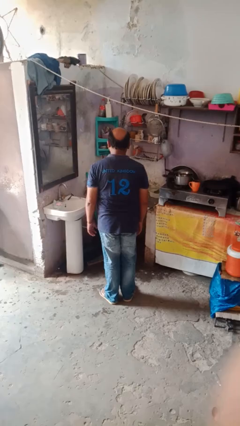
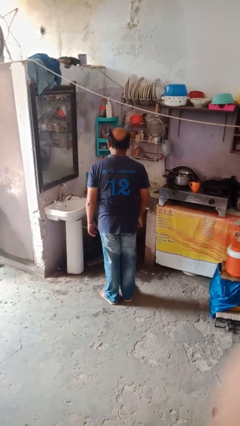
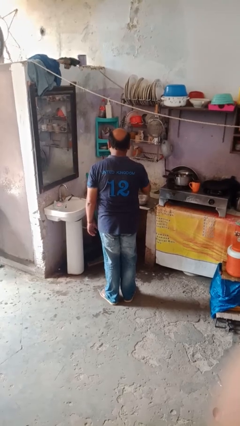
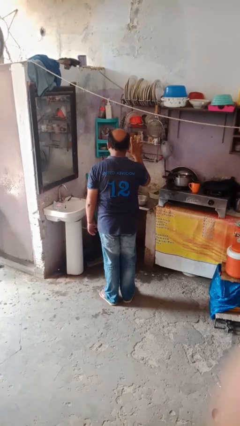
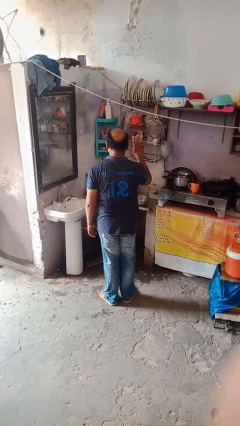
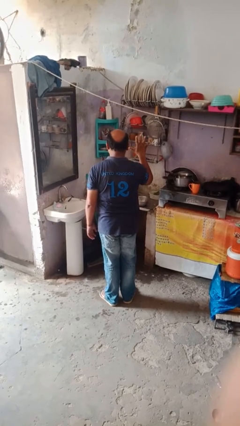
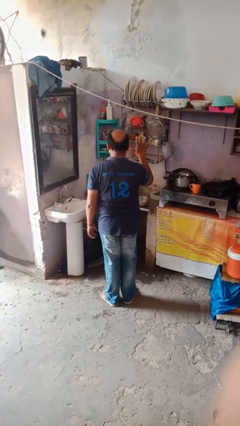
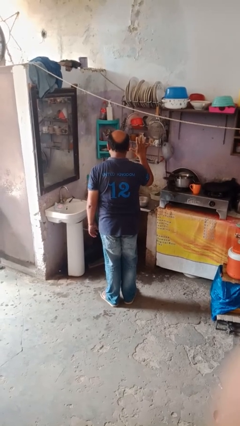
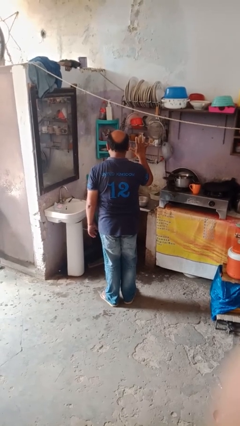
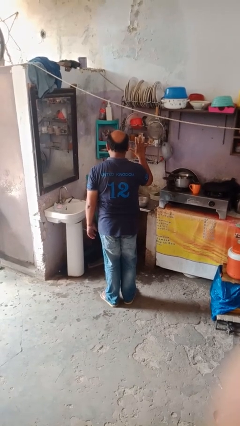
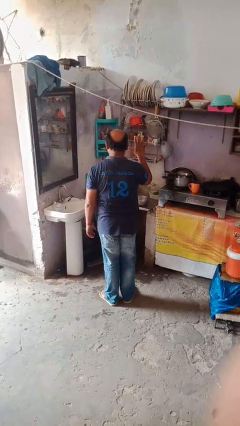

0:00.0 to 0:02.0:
person gestures number five

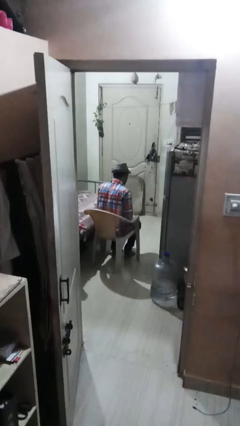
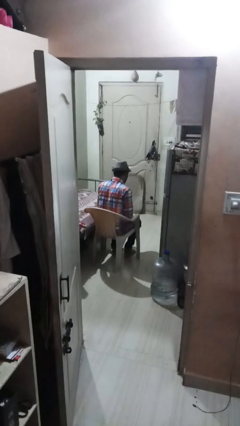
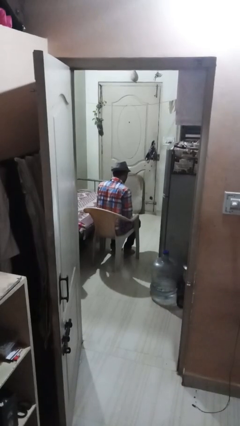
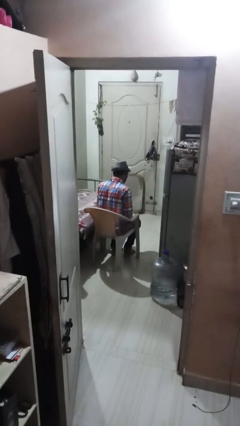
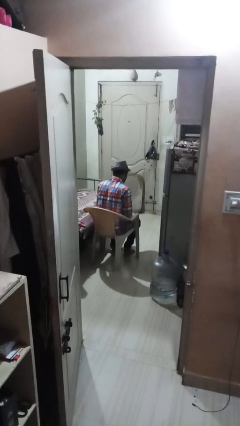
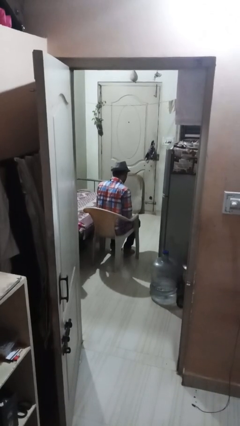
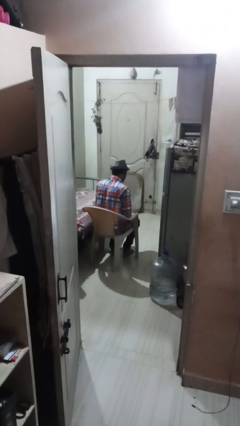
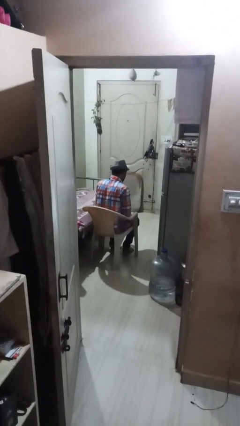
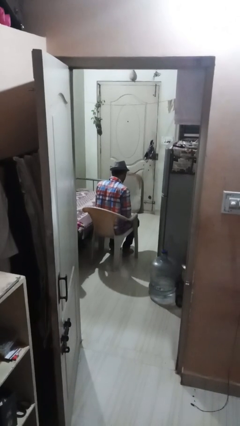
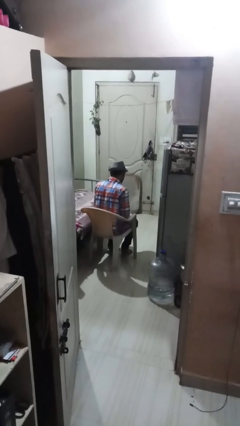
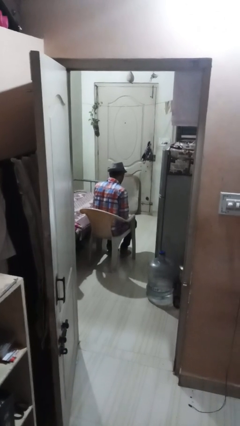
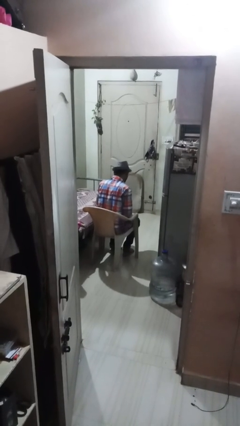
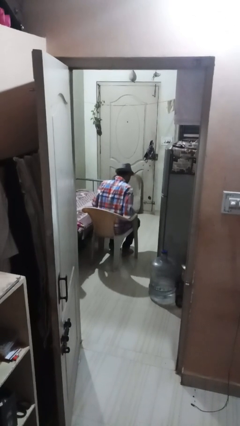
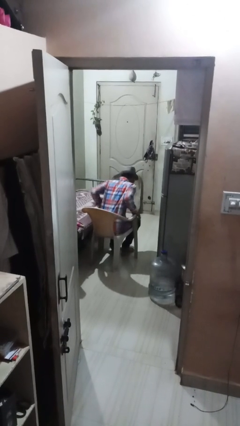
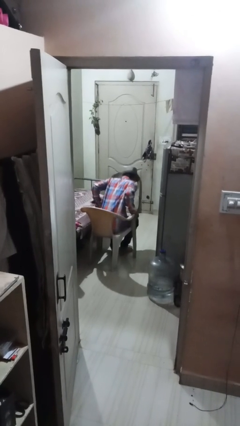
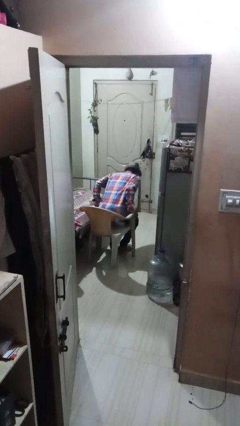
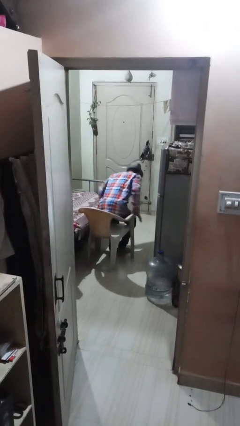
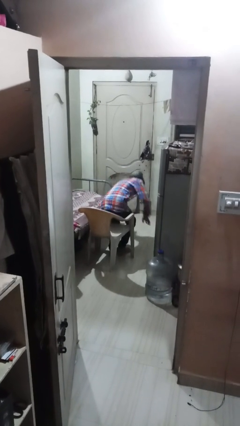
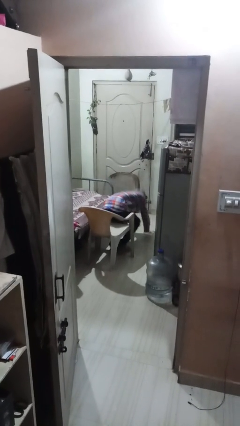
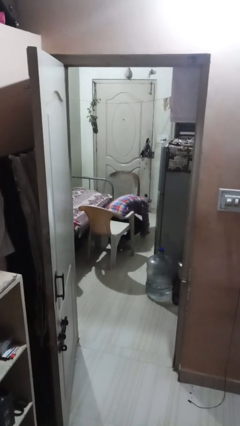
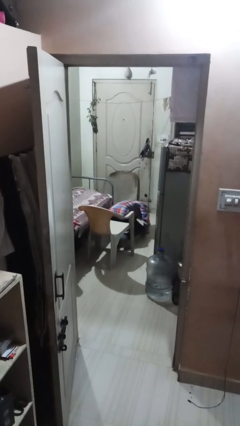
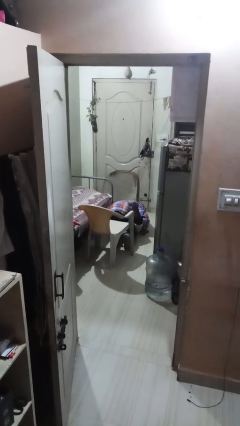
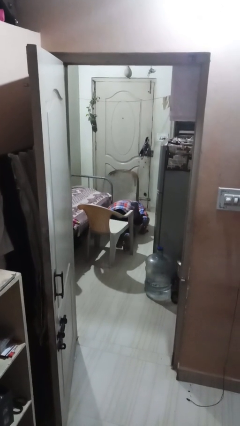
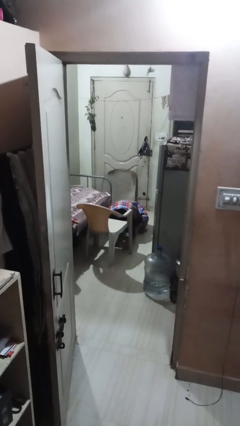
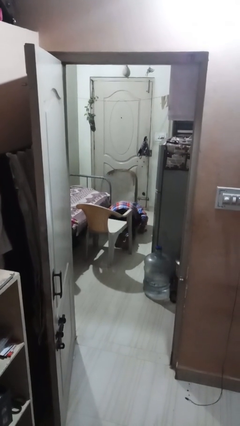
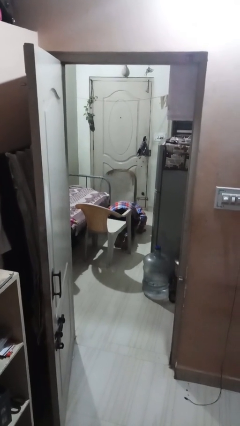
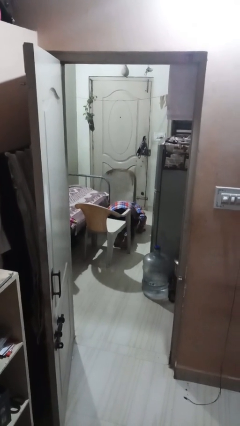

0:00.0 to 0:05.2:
person falls from chair

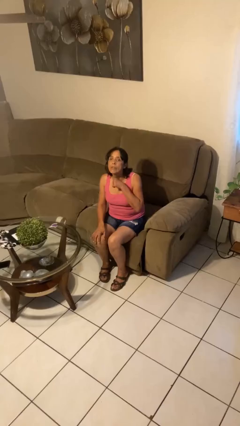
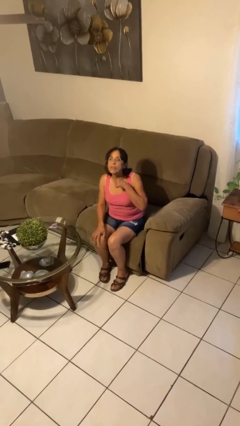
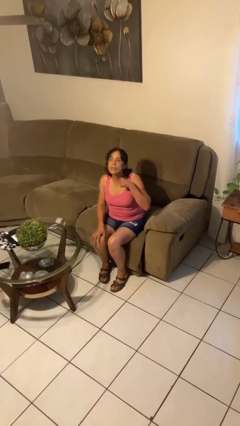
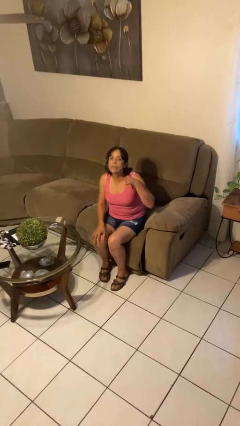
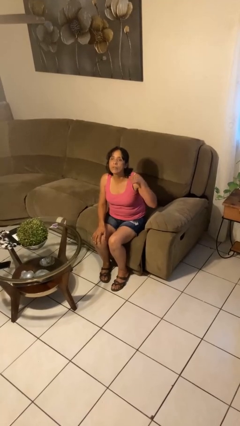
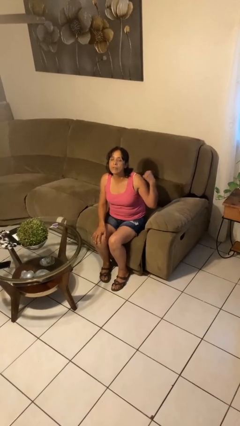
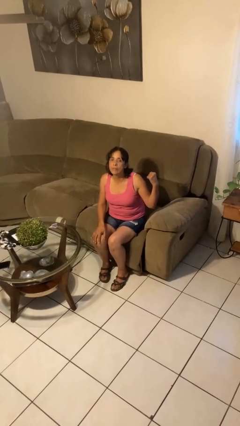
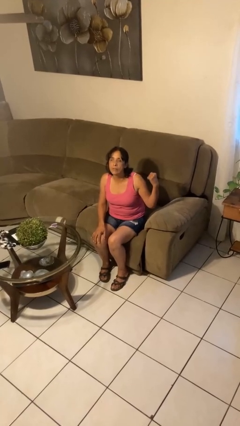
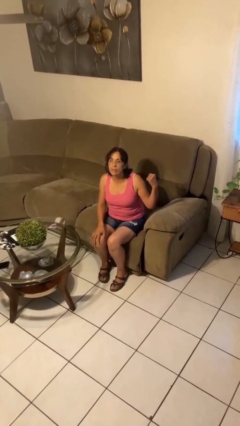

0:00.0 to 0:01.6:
person gestures cut

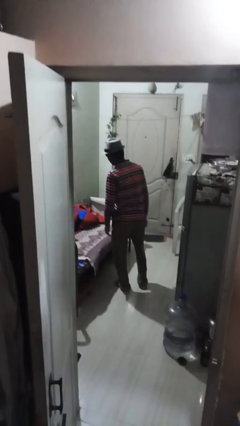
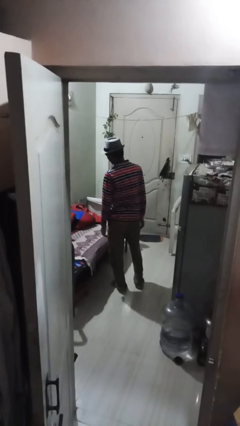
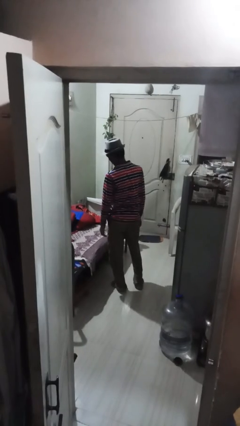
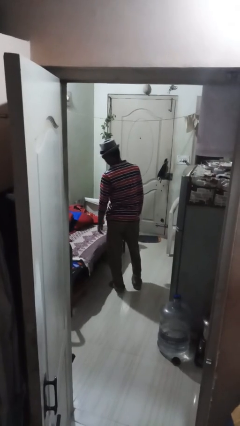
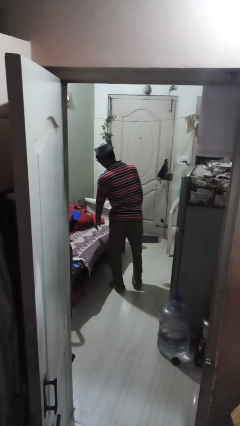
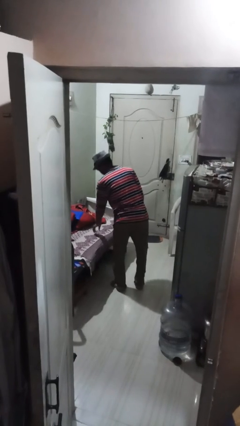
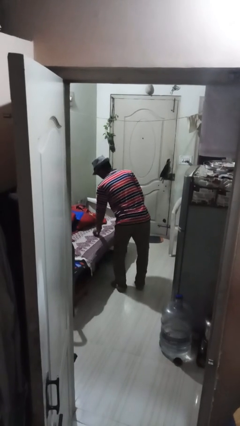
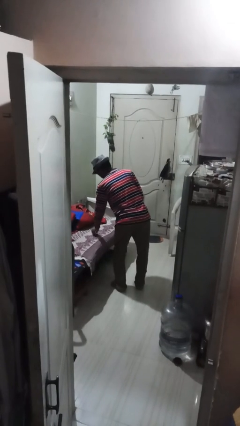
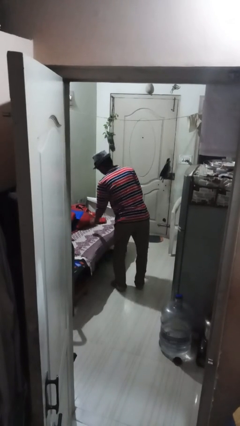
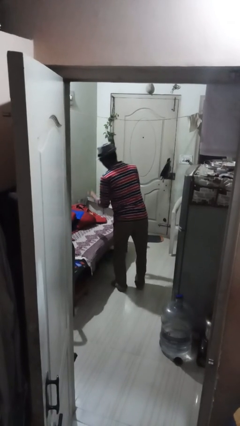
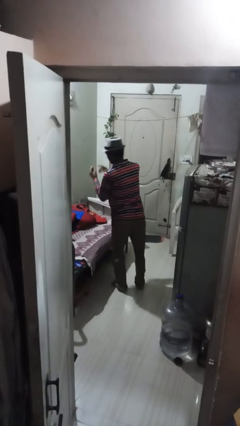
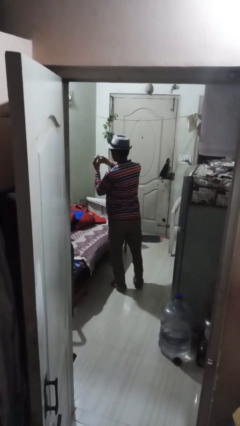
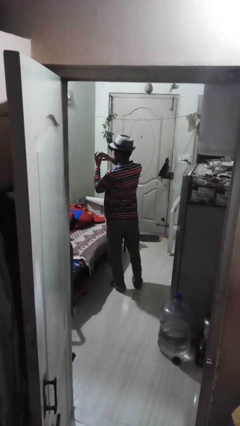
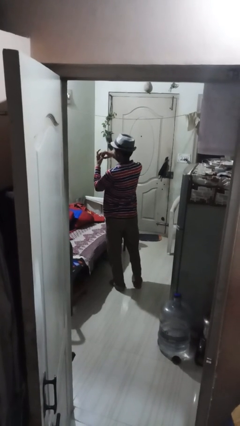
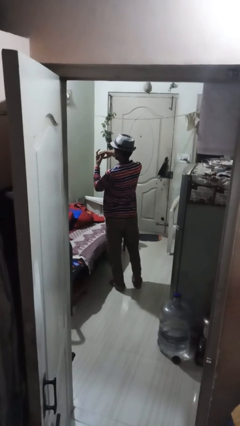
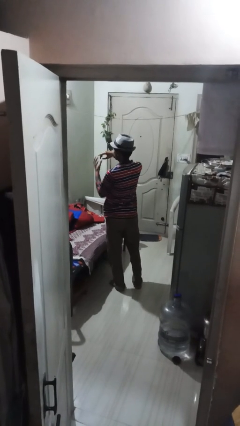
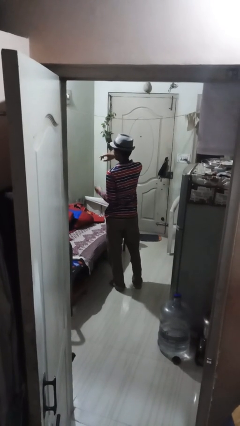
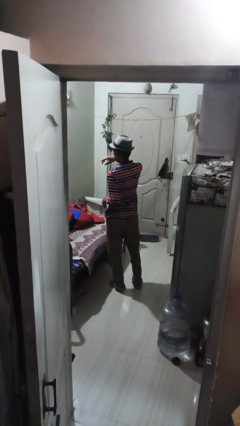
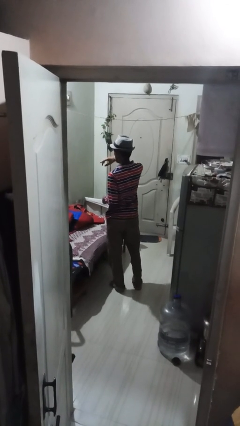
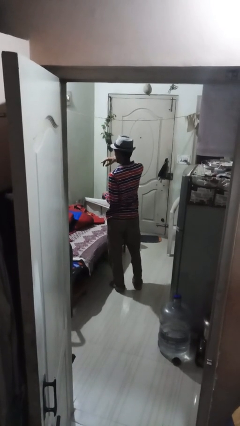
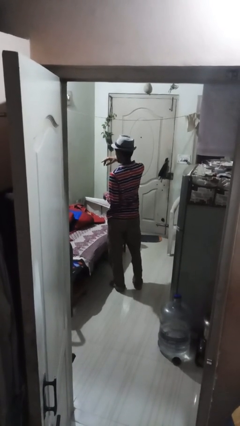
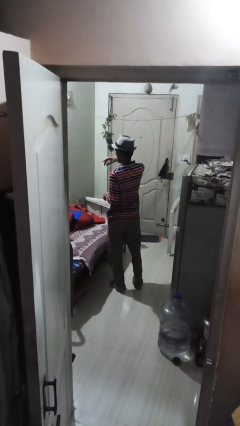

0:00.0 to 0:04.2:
person puts on ring

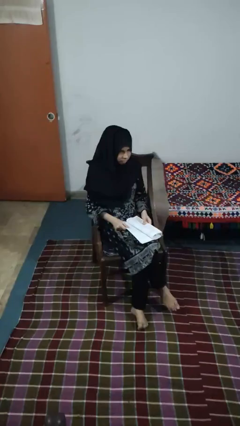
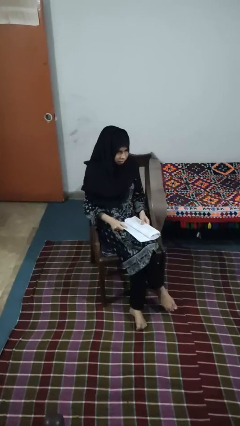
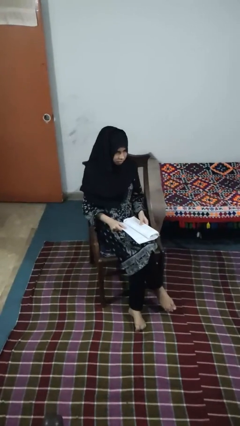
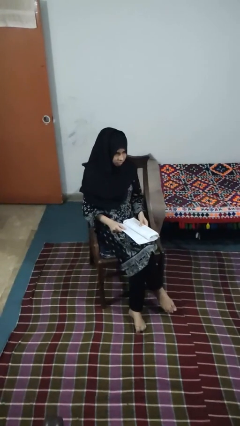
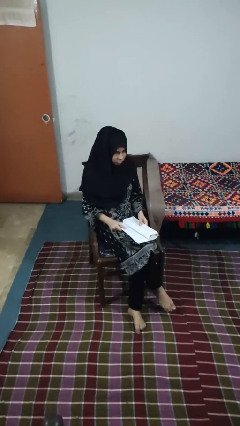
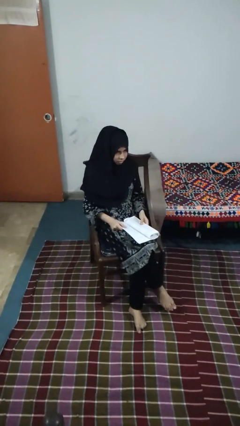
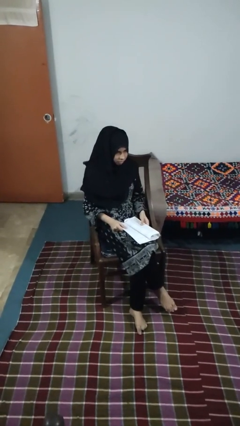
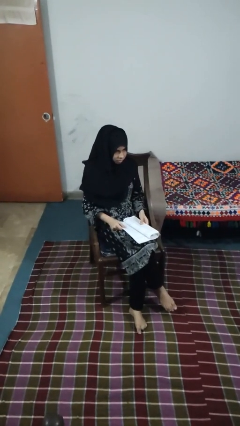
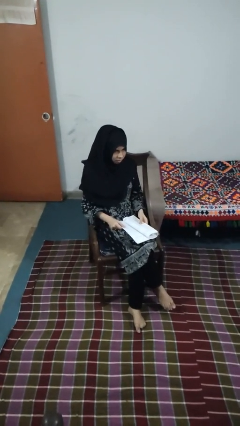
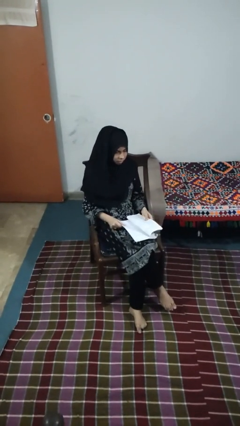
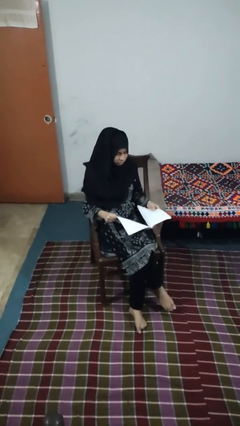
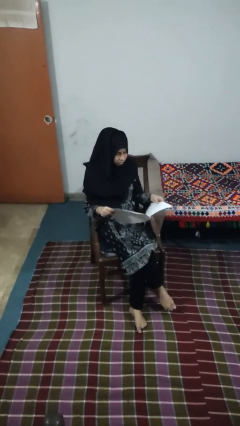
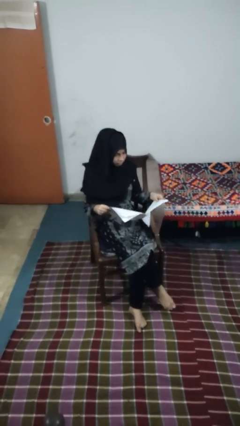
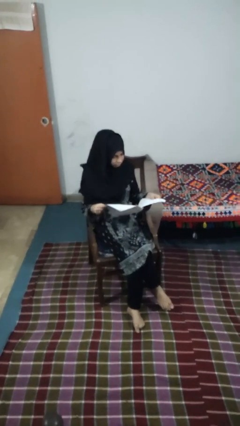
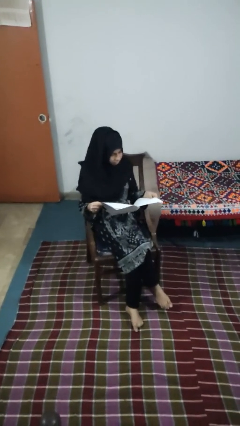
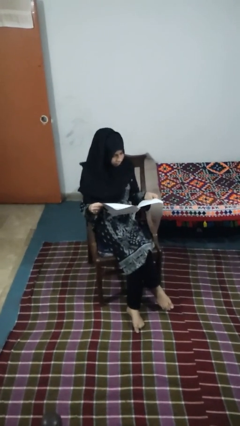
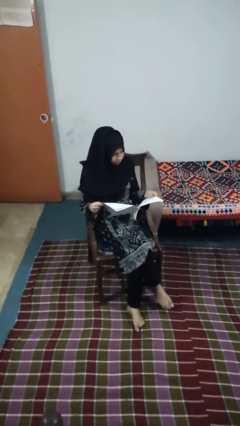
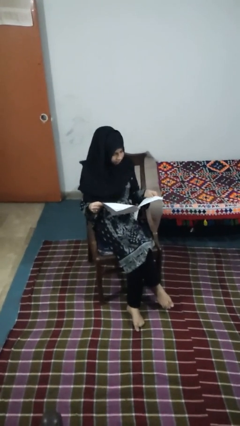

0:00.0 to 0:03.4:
person reads newspaper

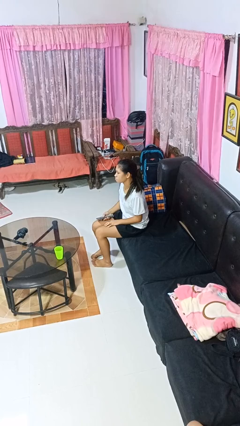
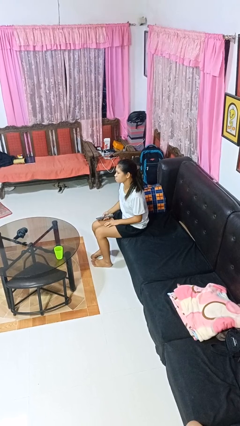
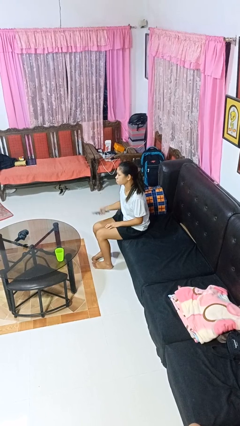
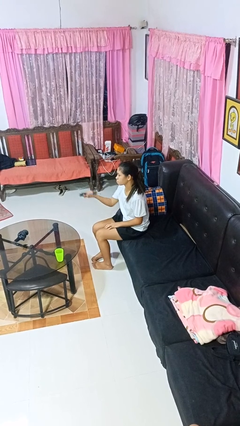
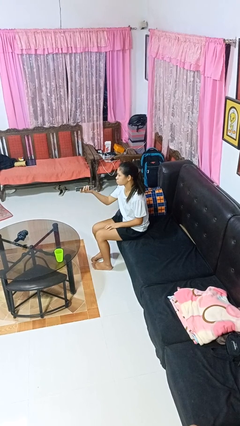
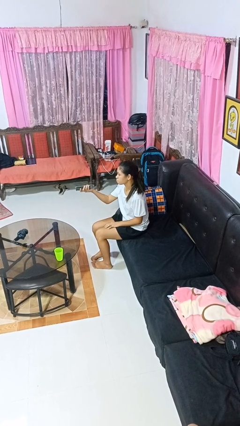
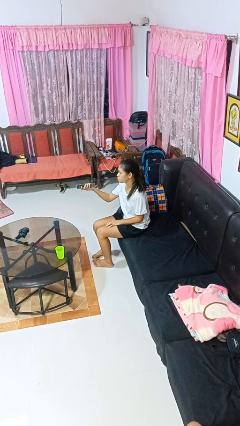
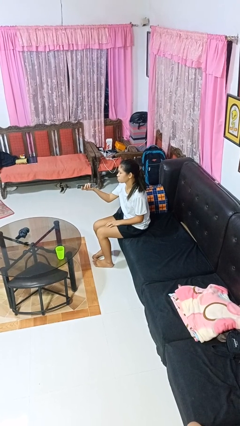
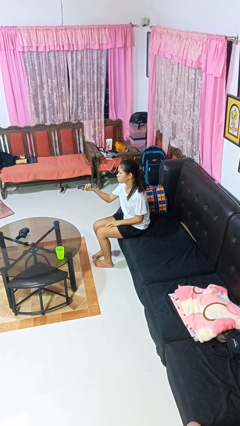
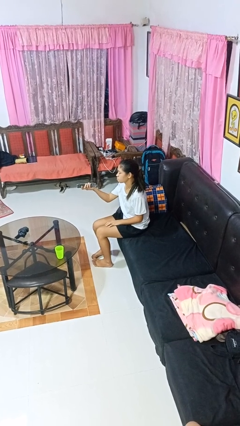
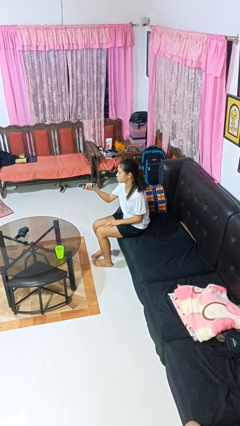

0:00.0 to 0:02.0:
person uses television remote
